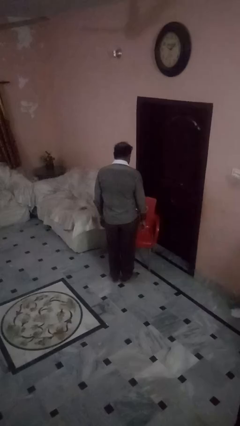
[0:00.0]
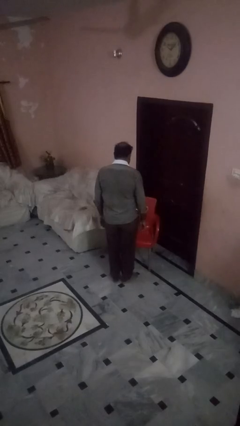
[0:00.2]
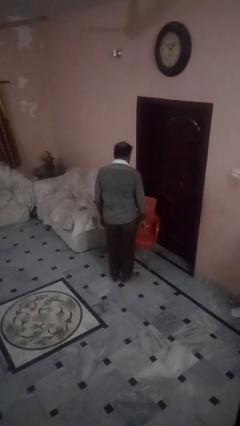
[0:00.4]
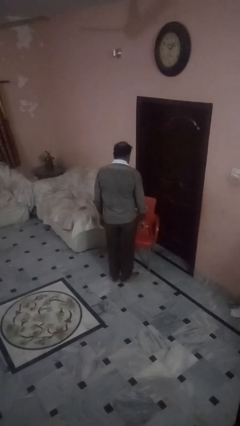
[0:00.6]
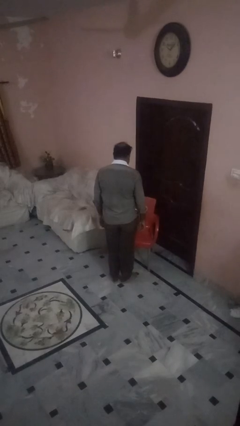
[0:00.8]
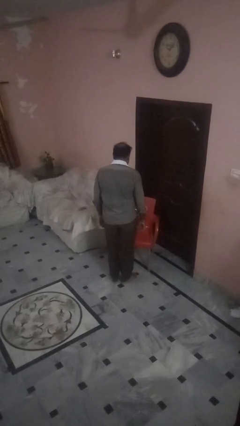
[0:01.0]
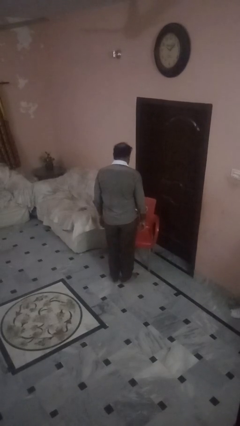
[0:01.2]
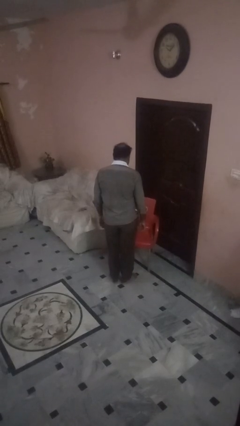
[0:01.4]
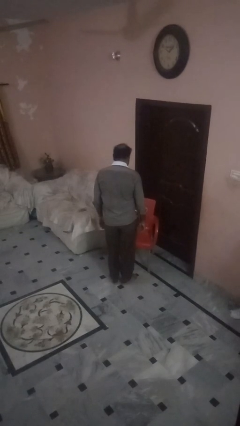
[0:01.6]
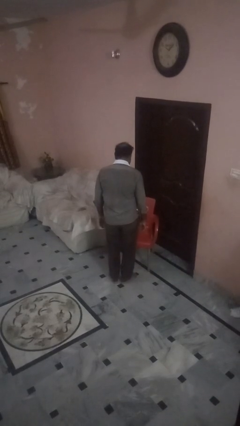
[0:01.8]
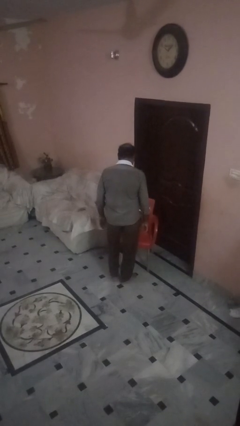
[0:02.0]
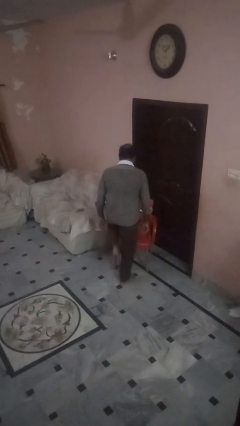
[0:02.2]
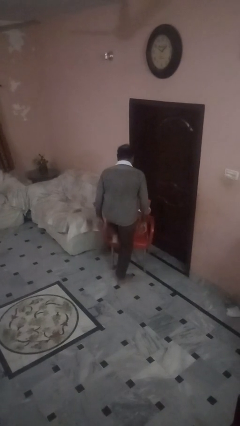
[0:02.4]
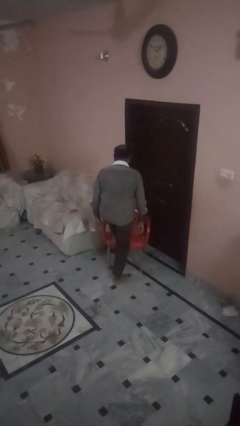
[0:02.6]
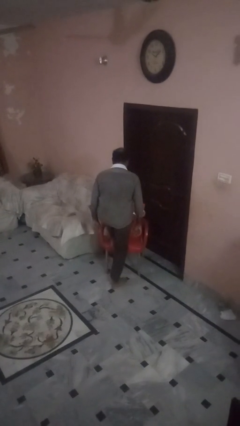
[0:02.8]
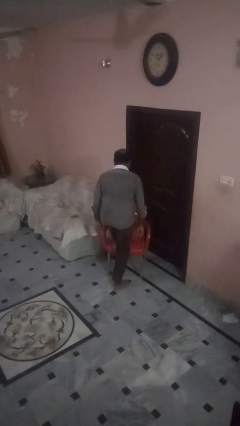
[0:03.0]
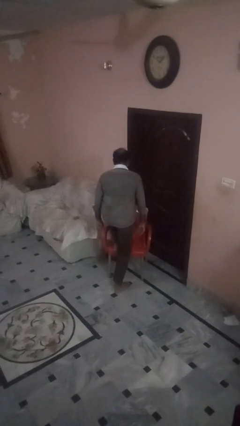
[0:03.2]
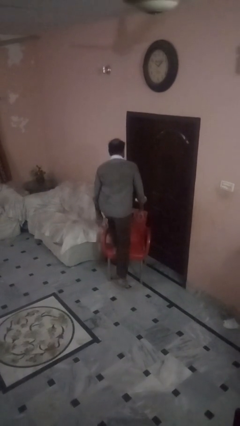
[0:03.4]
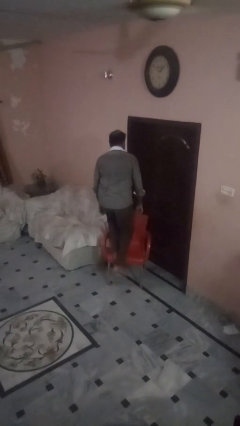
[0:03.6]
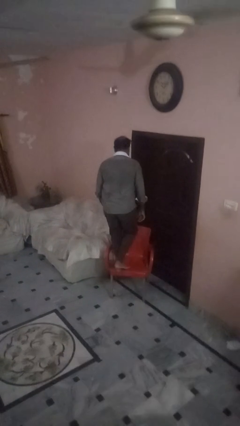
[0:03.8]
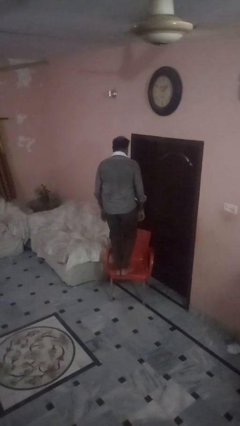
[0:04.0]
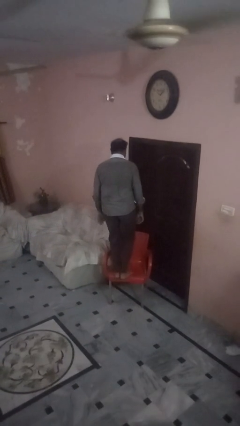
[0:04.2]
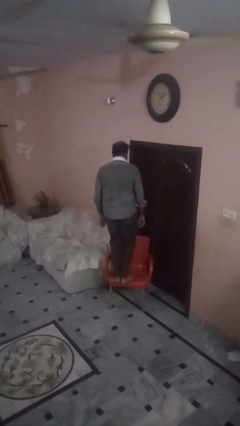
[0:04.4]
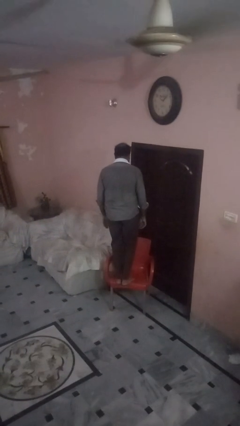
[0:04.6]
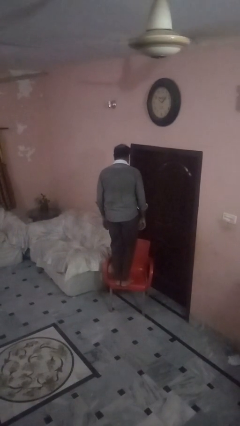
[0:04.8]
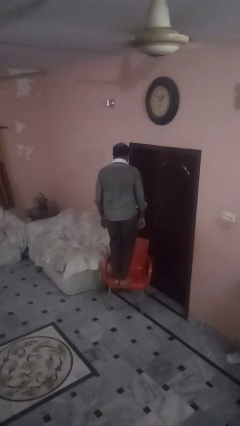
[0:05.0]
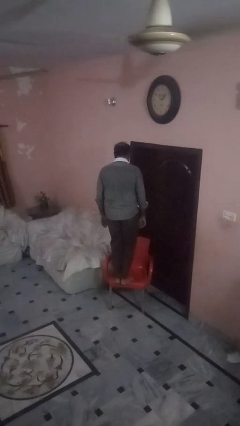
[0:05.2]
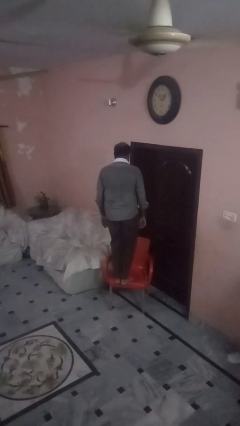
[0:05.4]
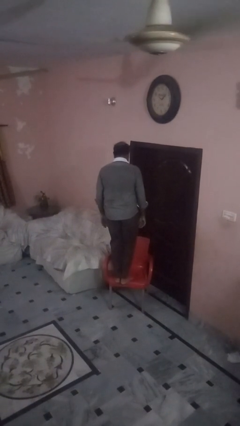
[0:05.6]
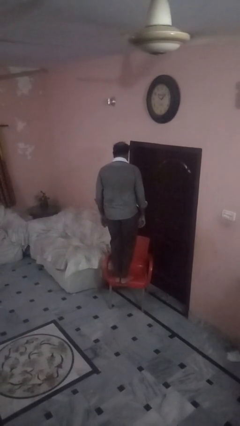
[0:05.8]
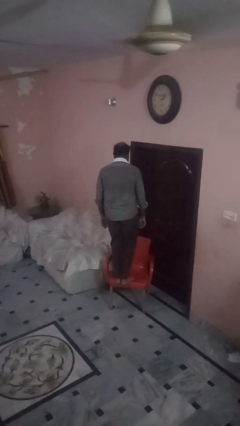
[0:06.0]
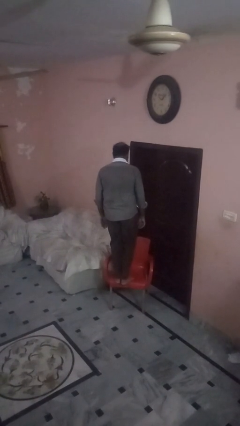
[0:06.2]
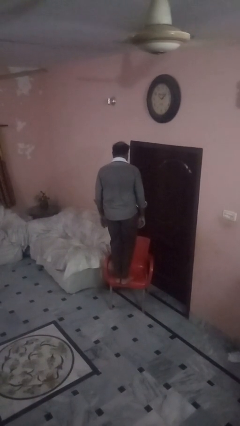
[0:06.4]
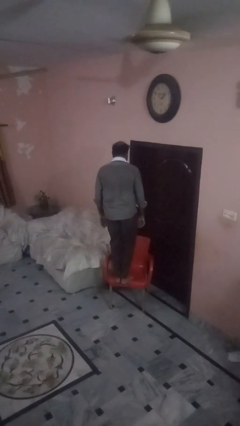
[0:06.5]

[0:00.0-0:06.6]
person climbs on chair

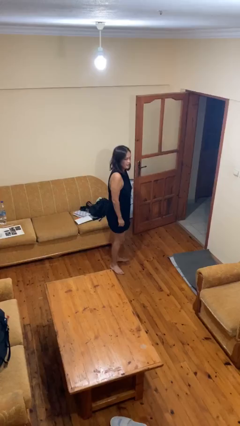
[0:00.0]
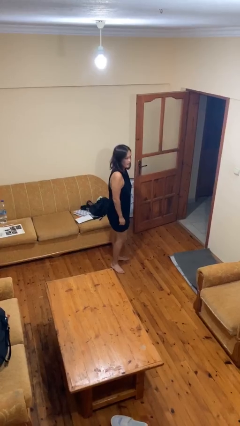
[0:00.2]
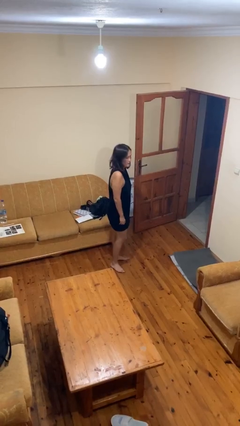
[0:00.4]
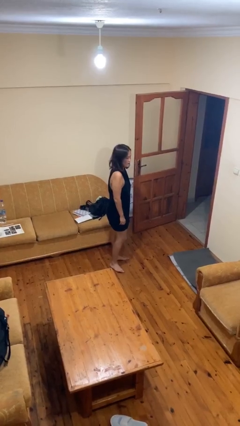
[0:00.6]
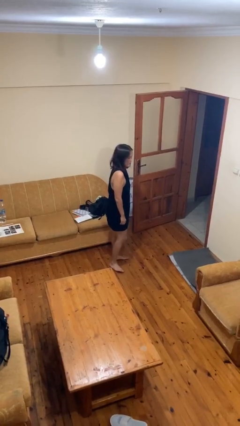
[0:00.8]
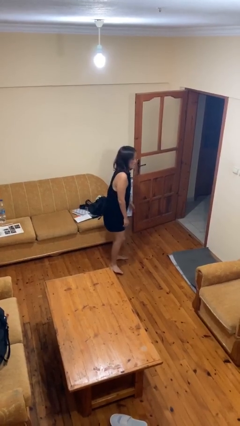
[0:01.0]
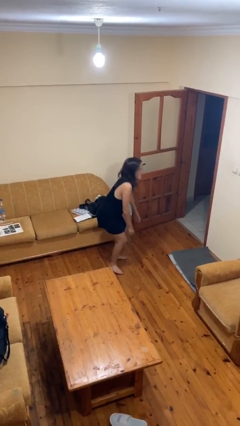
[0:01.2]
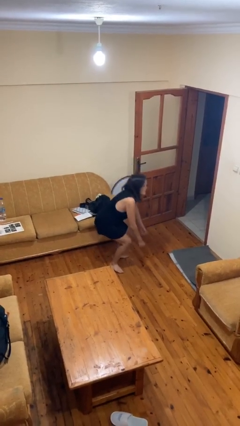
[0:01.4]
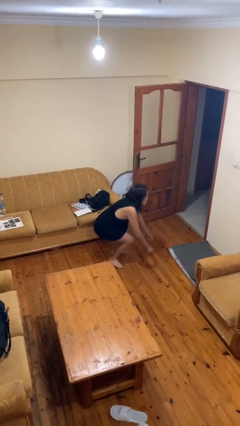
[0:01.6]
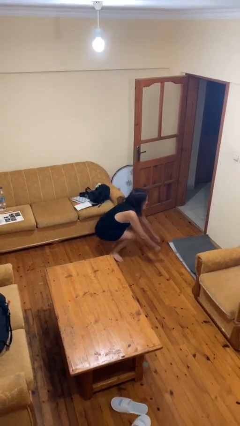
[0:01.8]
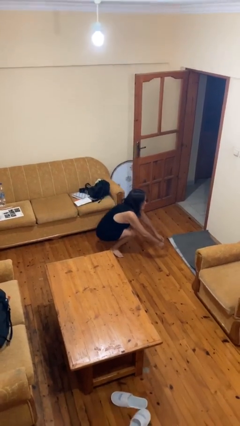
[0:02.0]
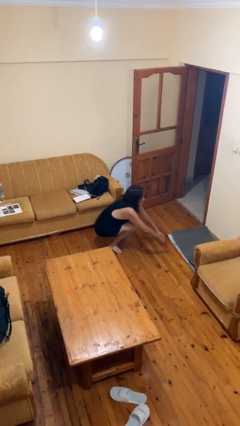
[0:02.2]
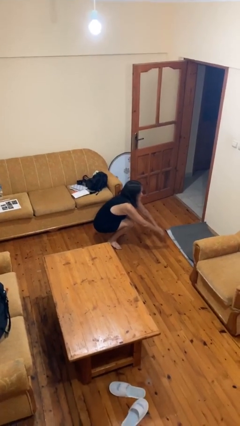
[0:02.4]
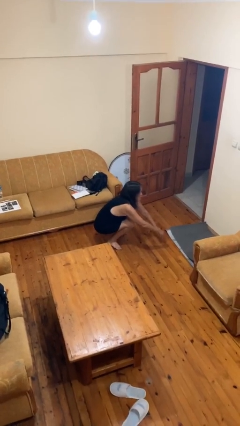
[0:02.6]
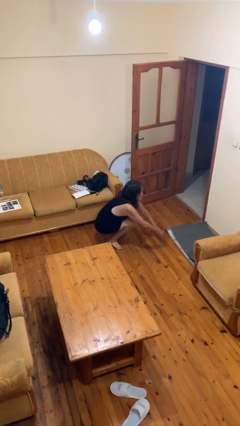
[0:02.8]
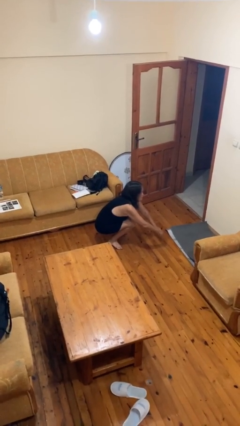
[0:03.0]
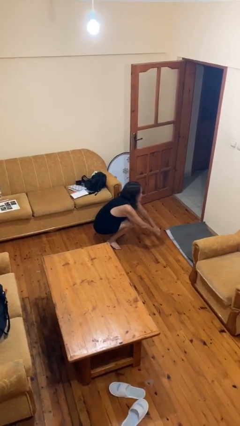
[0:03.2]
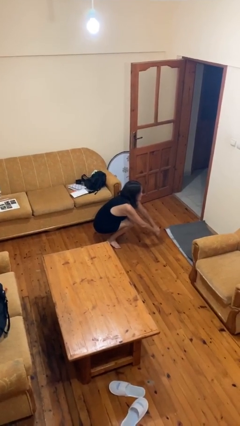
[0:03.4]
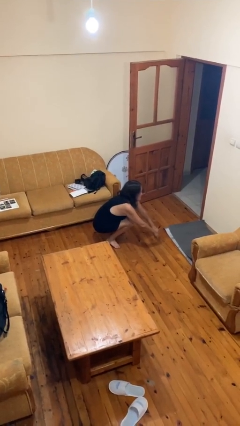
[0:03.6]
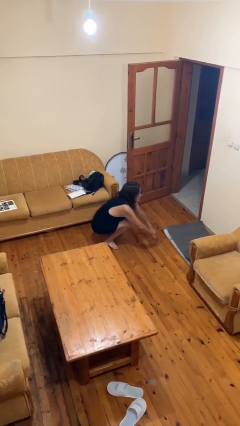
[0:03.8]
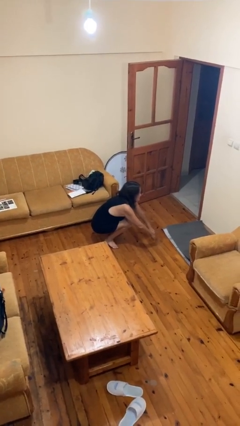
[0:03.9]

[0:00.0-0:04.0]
person squats

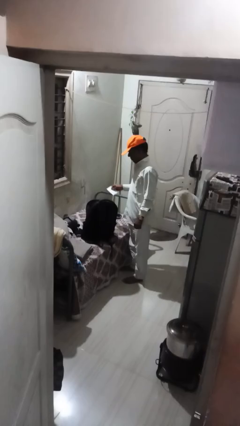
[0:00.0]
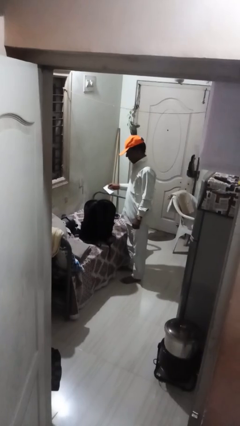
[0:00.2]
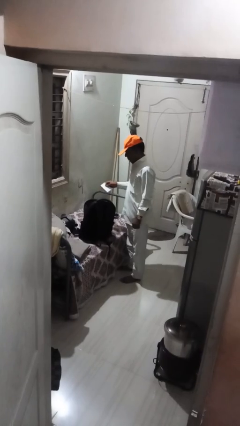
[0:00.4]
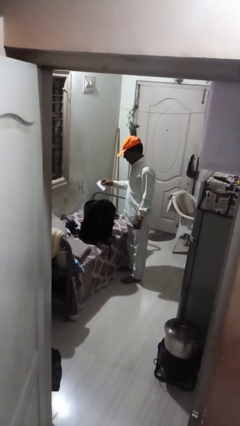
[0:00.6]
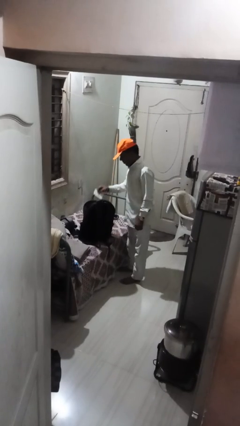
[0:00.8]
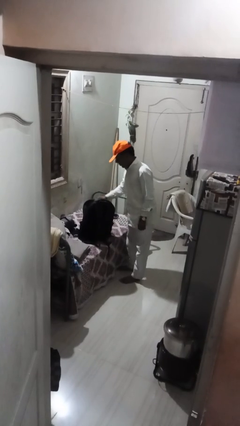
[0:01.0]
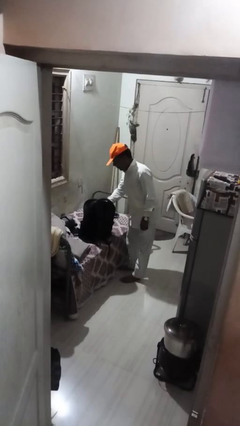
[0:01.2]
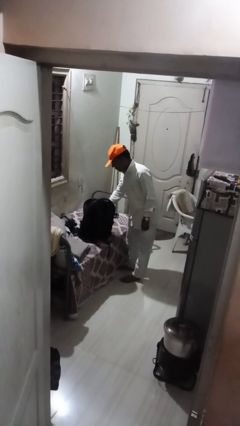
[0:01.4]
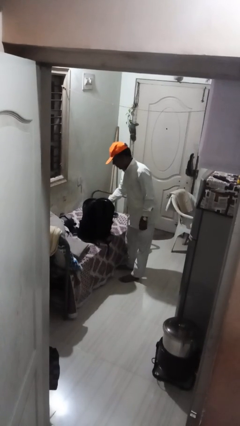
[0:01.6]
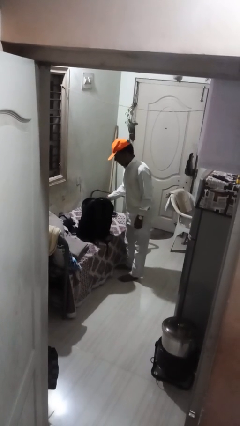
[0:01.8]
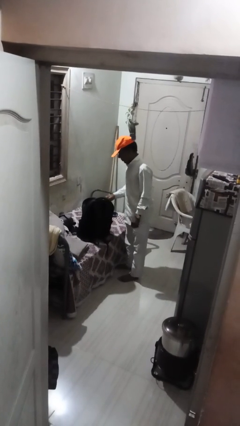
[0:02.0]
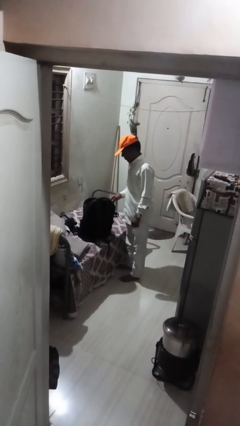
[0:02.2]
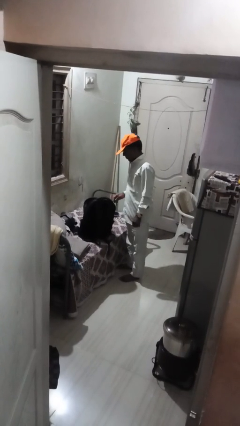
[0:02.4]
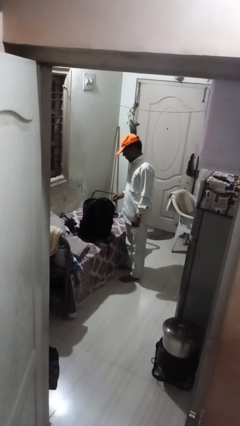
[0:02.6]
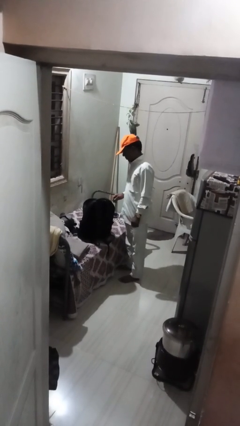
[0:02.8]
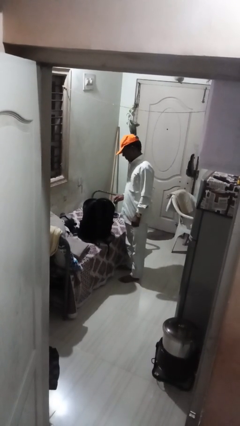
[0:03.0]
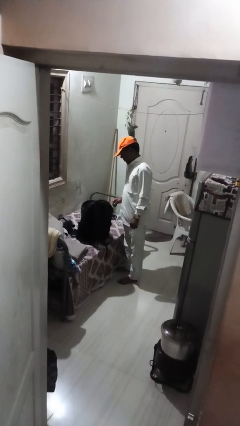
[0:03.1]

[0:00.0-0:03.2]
person puts object into backpack

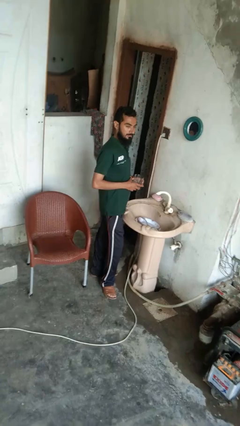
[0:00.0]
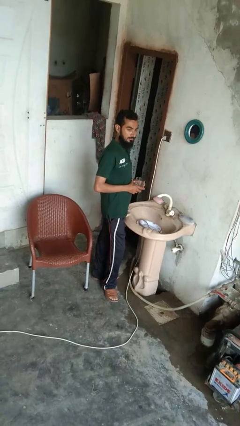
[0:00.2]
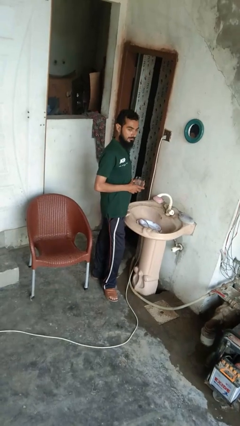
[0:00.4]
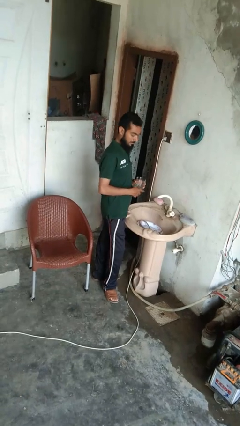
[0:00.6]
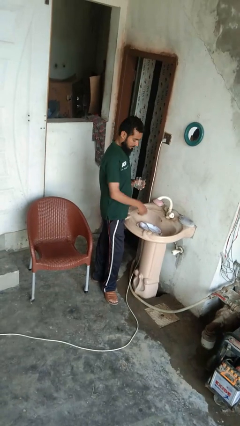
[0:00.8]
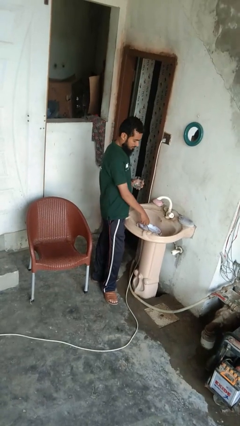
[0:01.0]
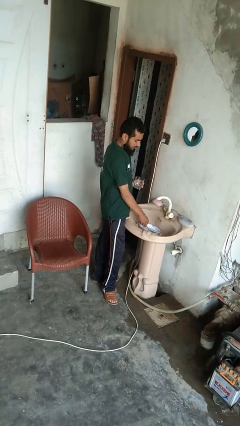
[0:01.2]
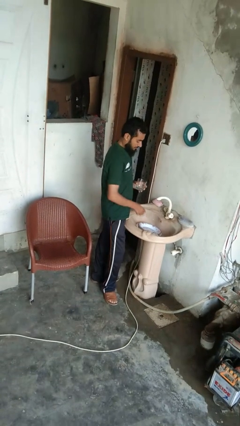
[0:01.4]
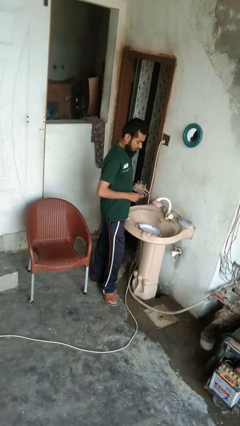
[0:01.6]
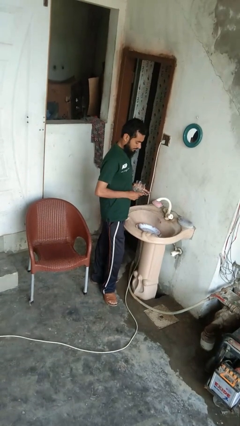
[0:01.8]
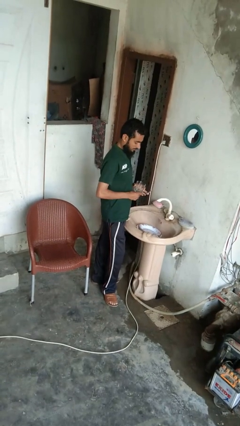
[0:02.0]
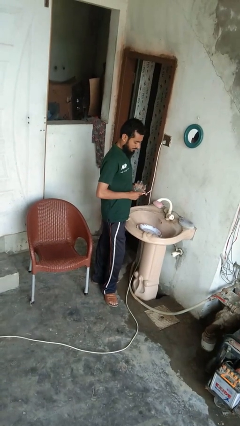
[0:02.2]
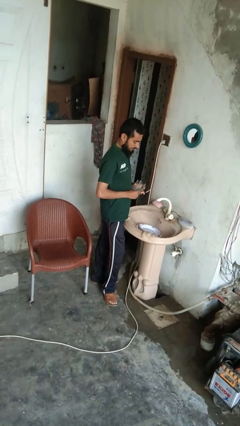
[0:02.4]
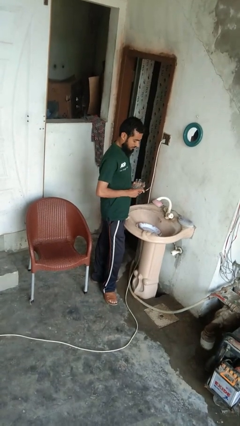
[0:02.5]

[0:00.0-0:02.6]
person unloads dishwasher

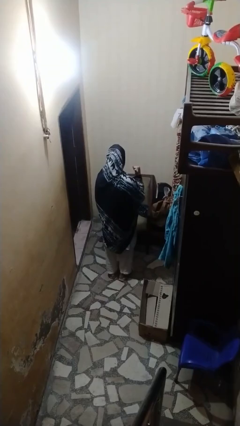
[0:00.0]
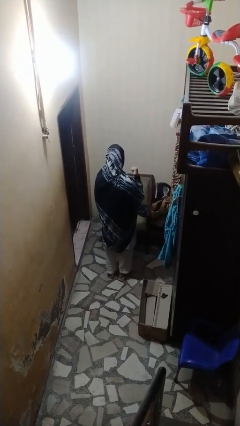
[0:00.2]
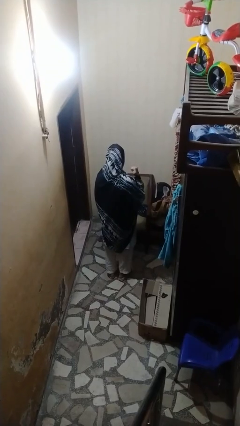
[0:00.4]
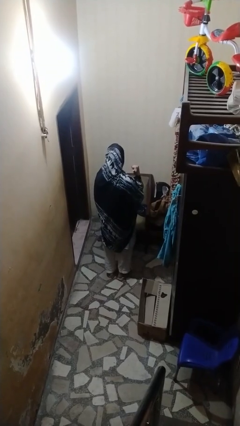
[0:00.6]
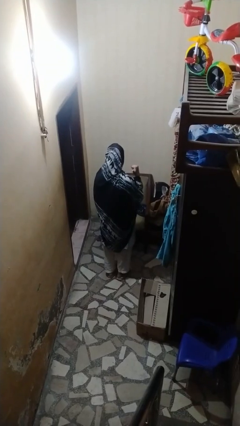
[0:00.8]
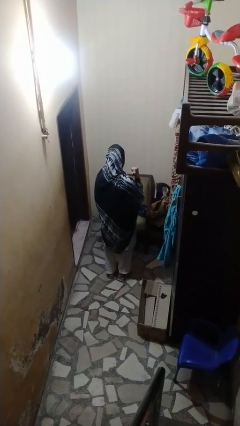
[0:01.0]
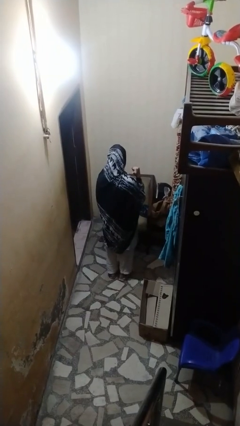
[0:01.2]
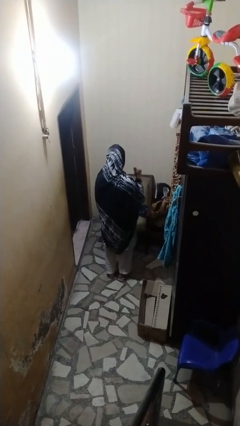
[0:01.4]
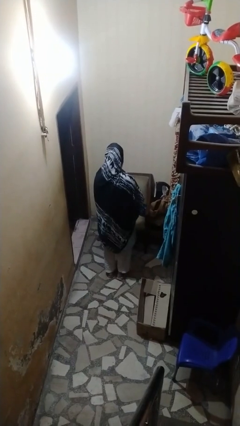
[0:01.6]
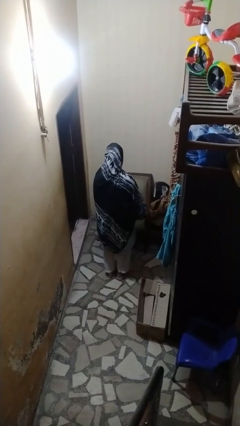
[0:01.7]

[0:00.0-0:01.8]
person gestures behind me
